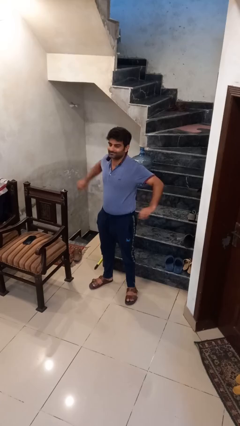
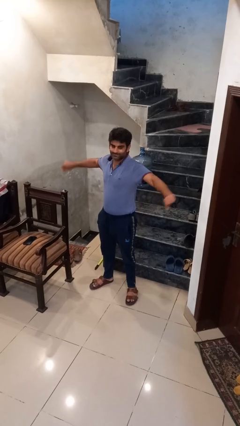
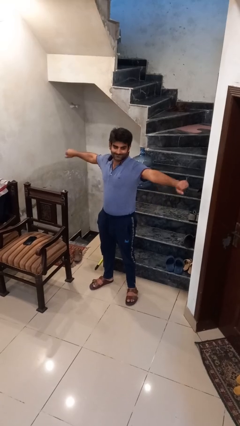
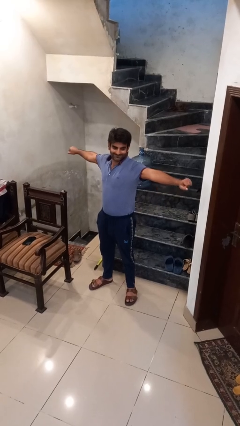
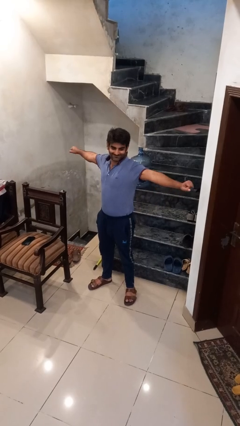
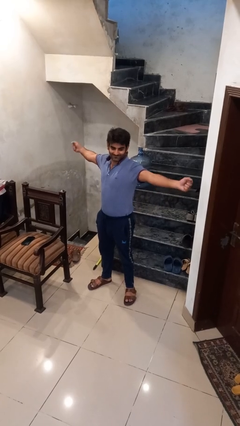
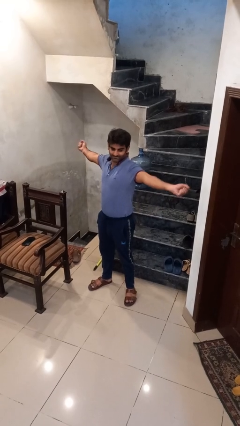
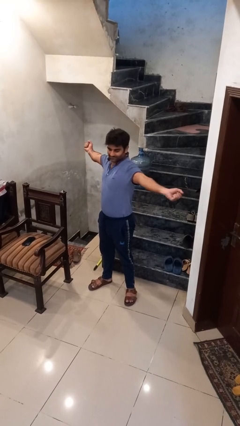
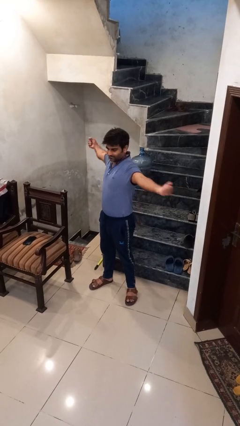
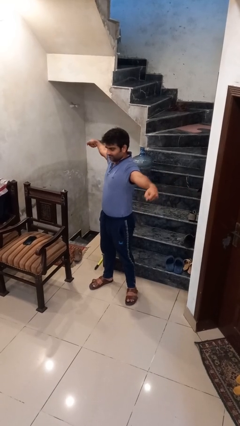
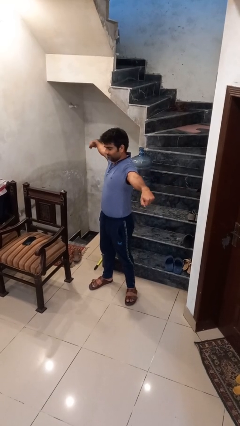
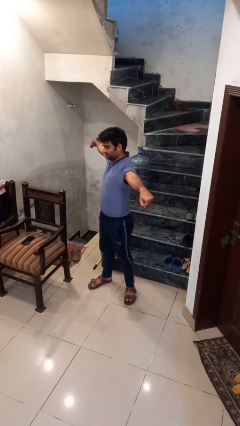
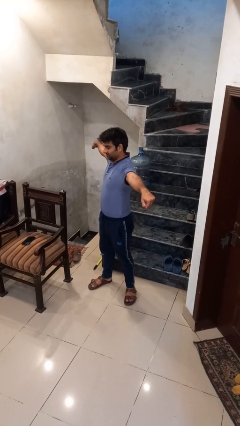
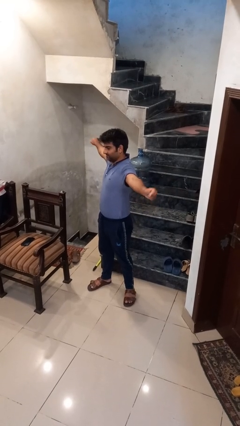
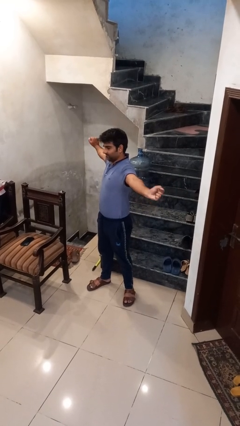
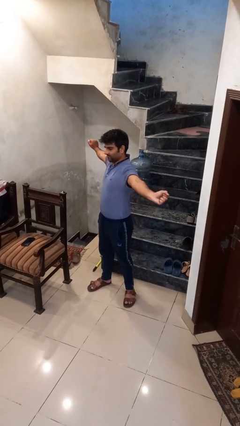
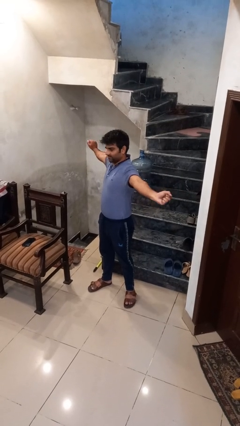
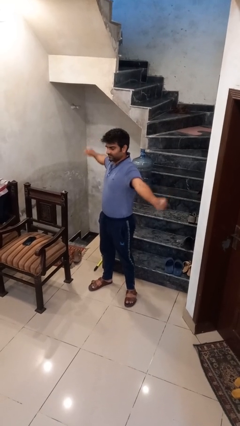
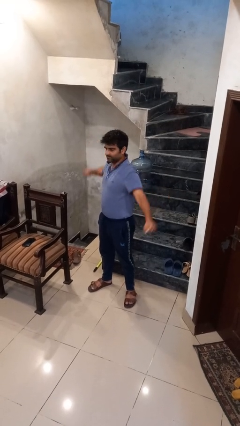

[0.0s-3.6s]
person stretches arms to side

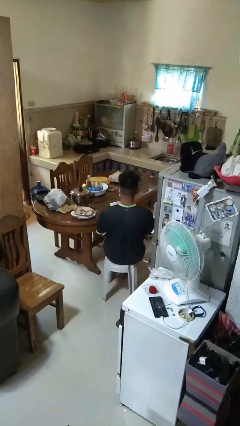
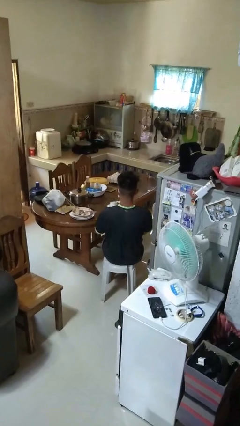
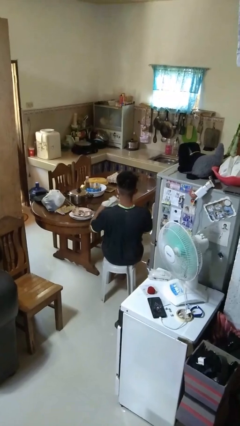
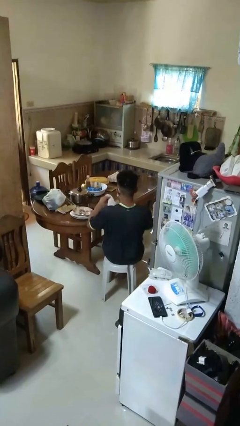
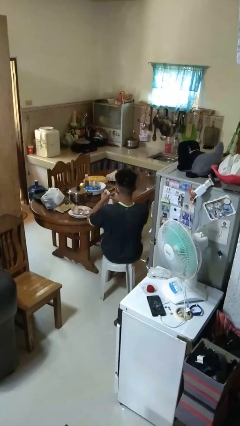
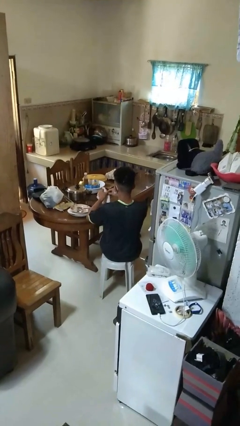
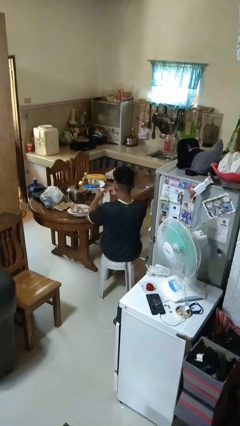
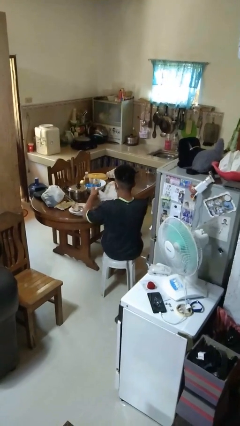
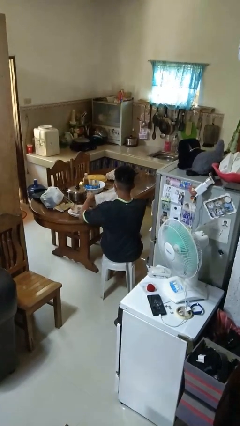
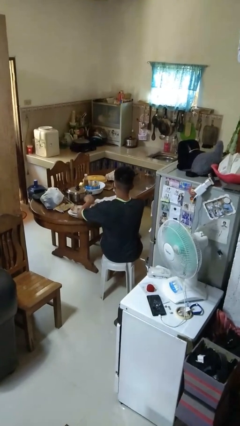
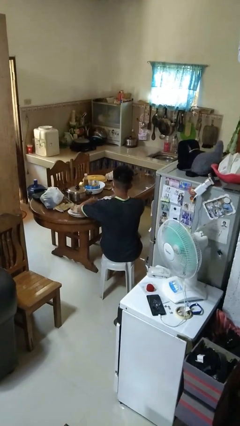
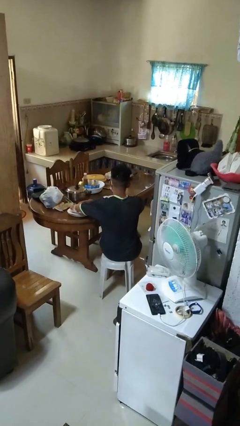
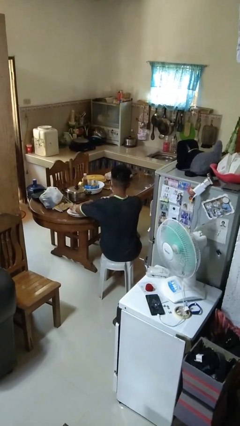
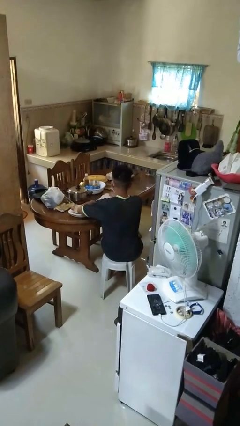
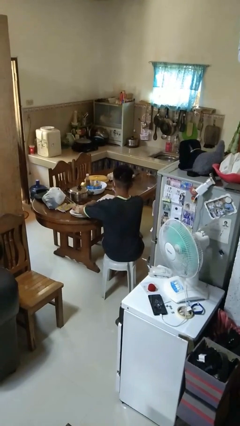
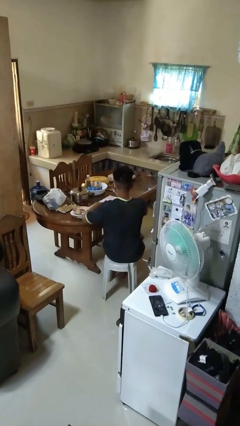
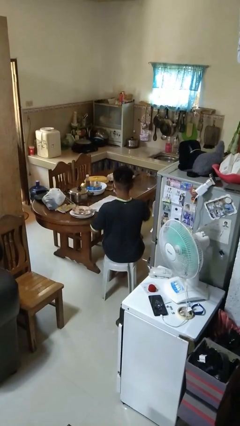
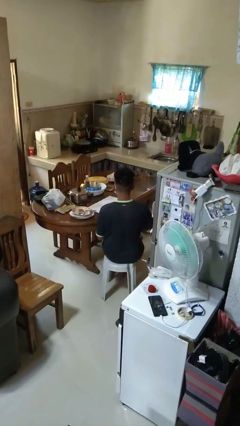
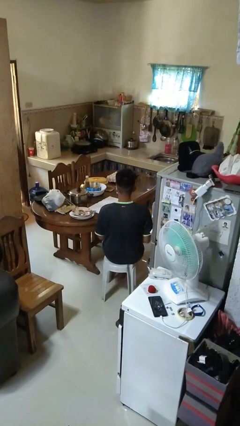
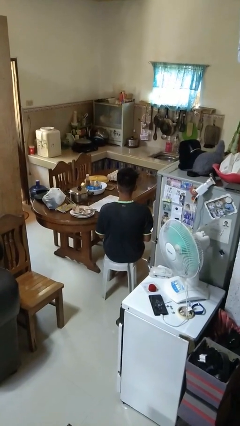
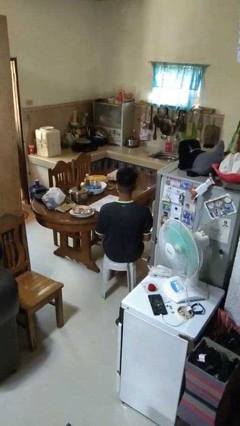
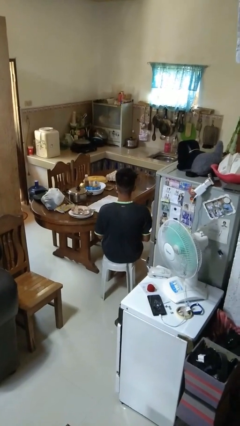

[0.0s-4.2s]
person spreads tablecloth

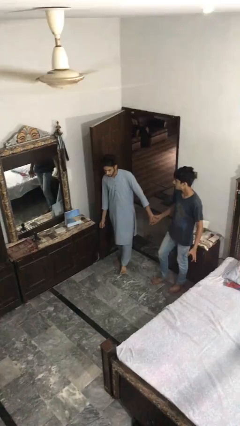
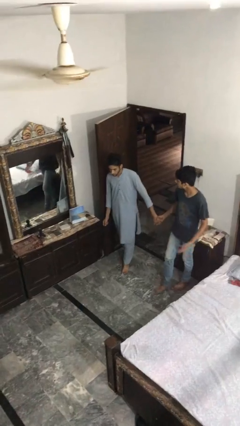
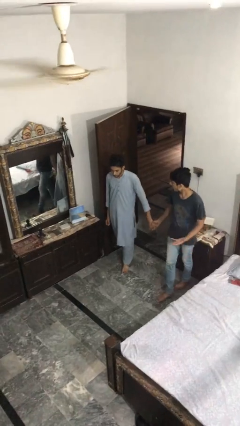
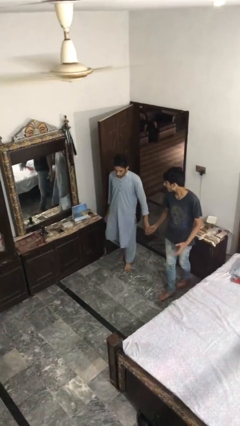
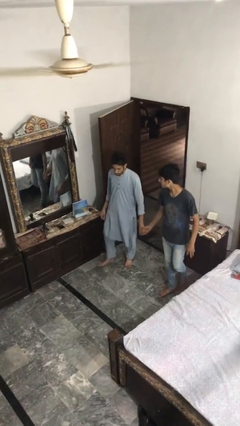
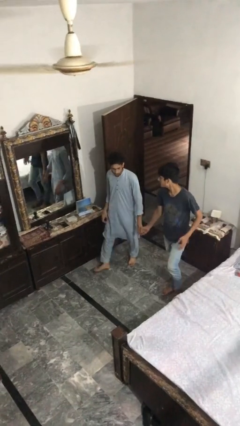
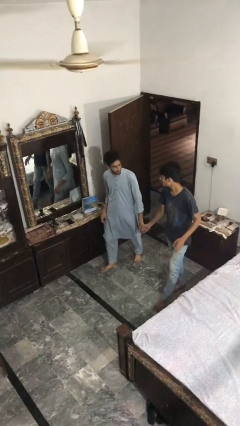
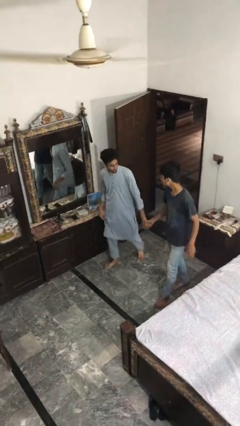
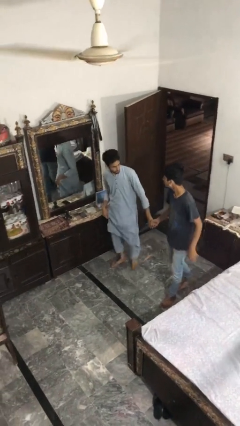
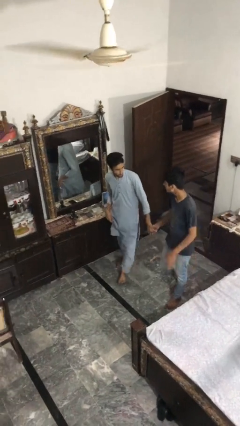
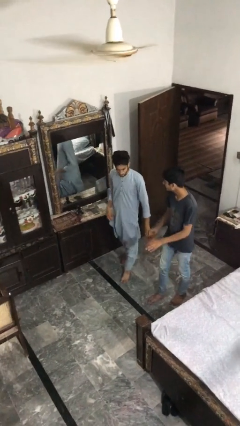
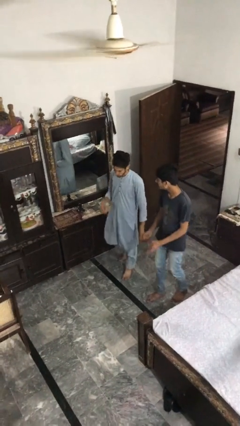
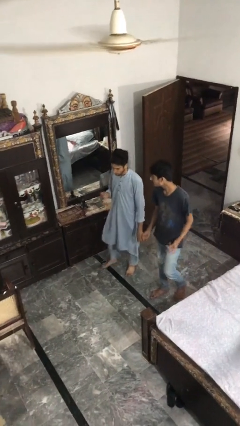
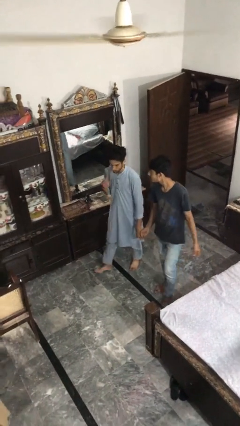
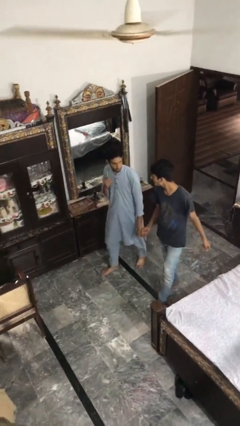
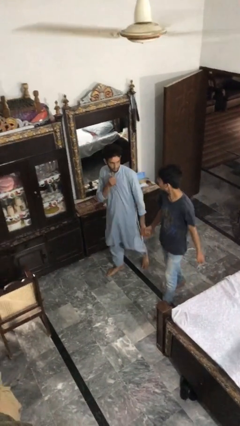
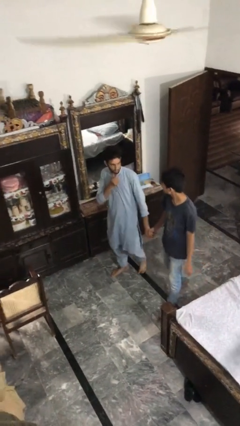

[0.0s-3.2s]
person holds hand

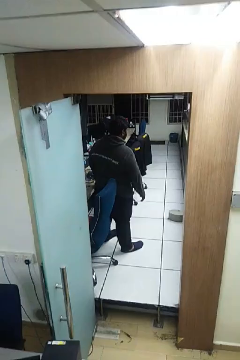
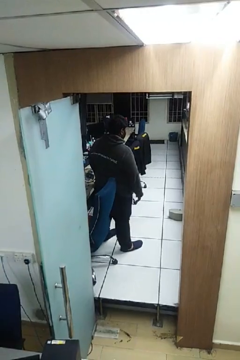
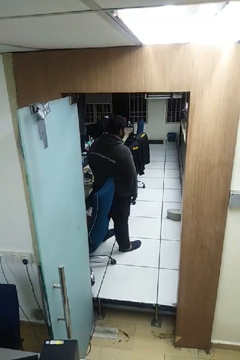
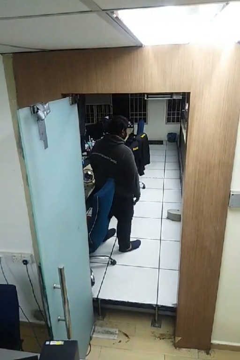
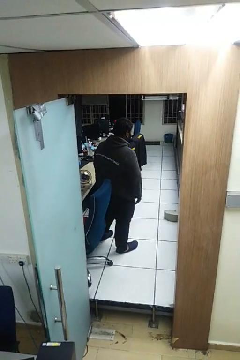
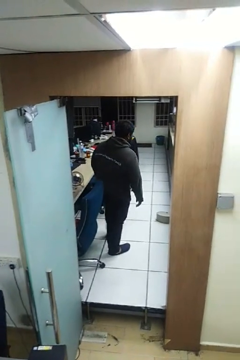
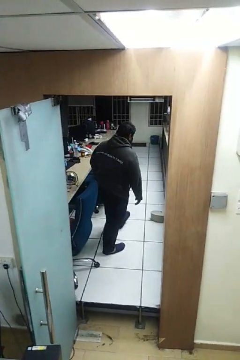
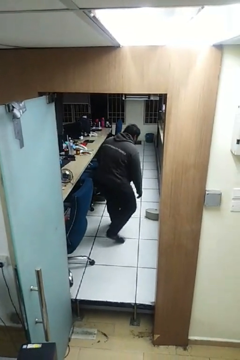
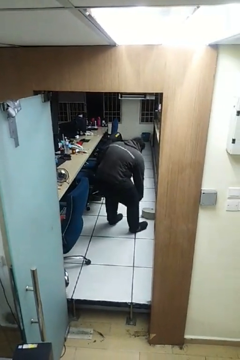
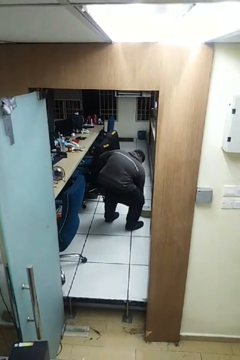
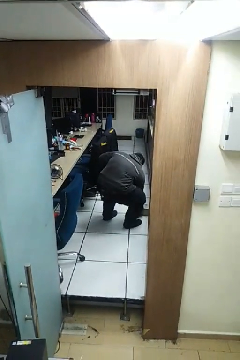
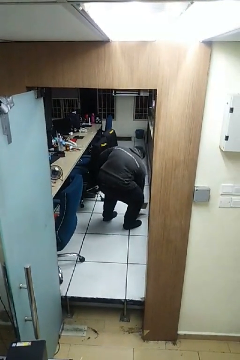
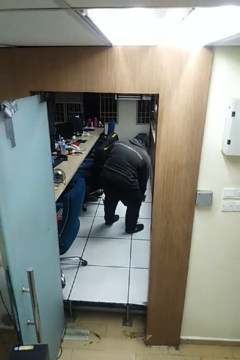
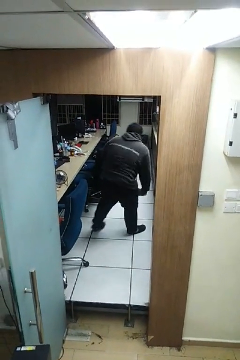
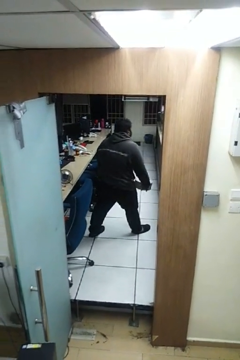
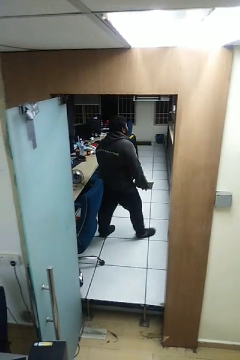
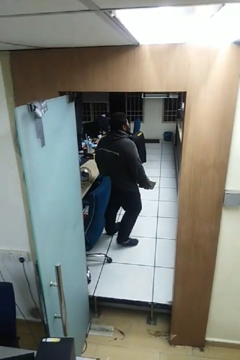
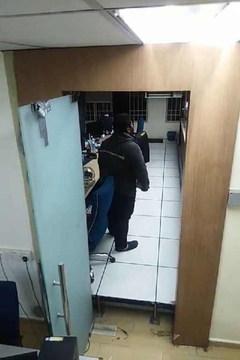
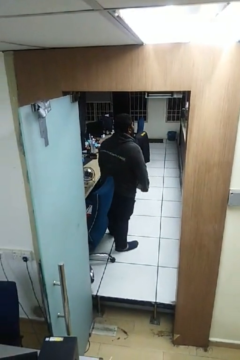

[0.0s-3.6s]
person picks up object from floor

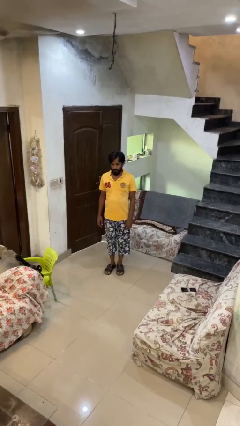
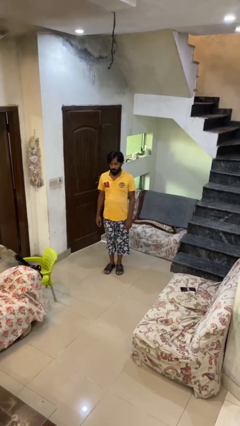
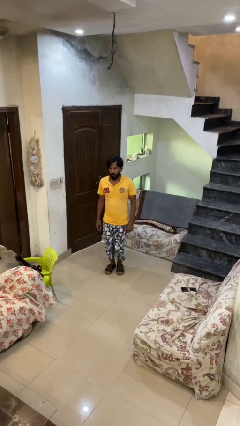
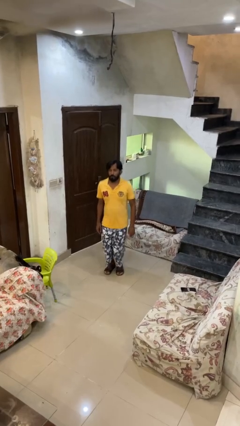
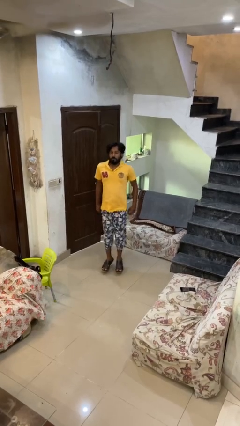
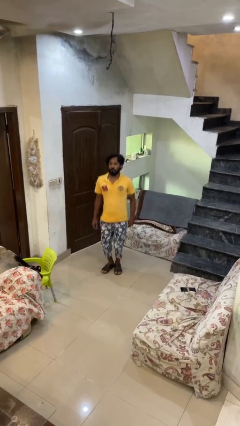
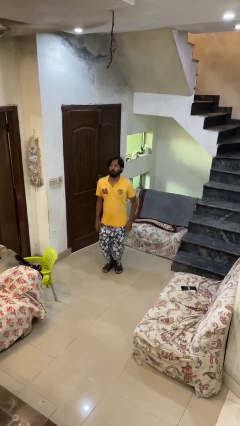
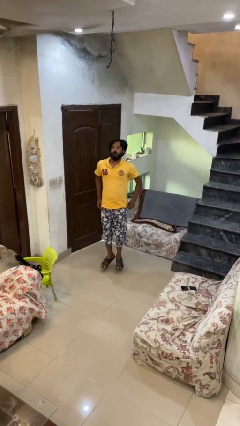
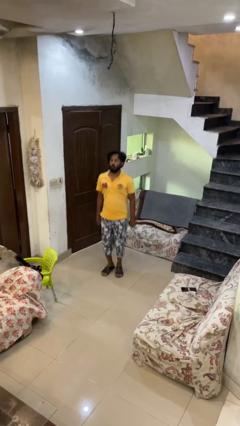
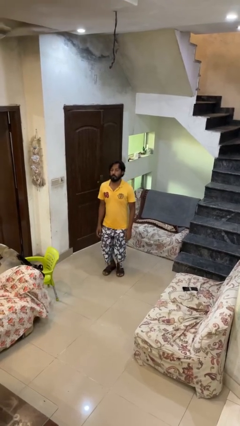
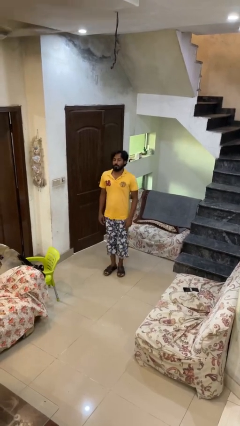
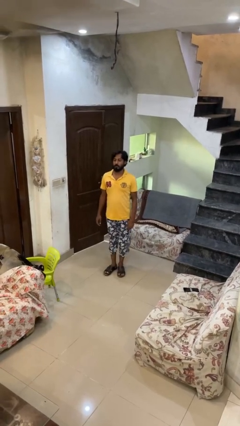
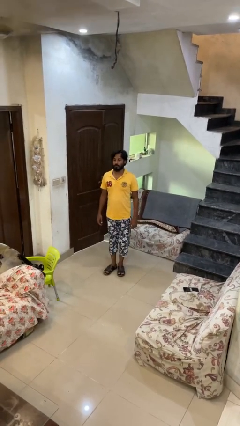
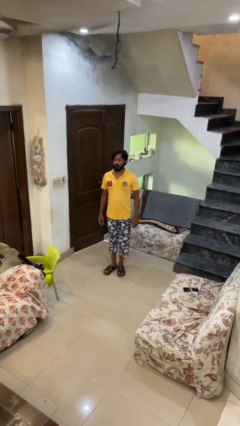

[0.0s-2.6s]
person jumps

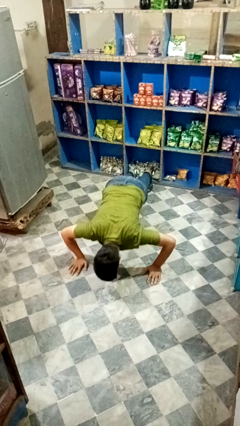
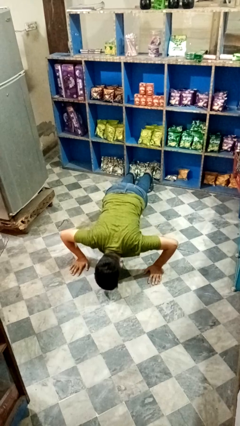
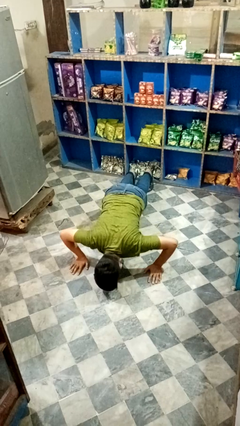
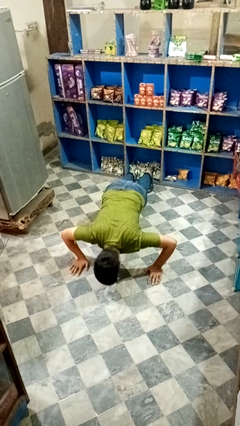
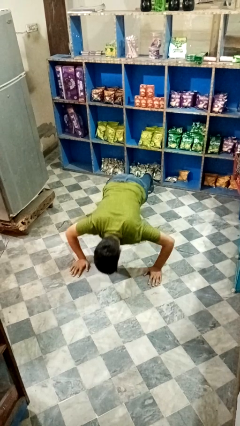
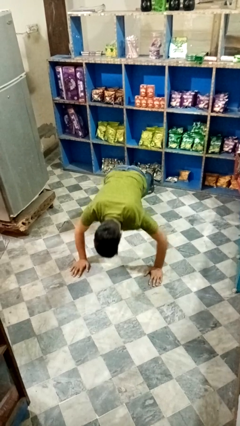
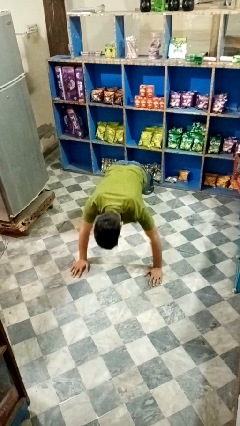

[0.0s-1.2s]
person exercises with pushup
